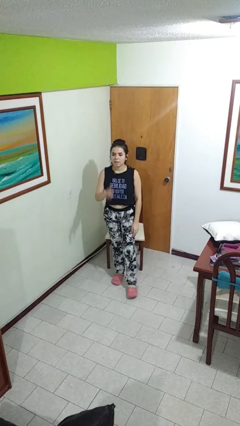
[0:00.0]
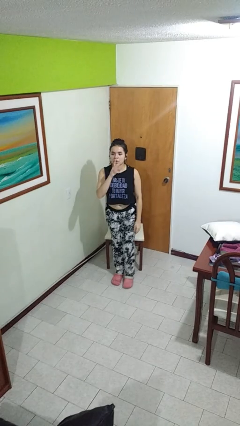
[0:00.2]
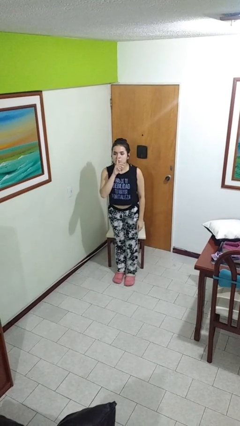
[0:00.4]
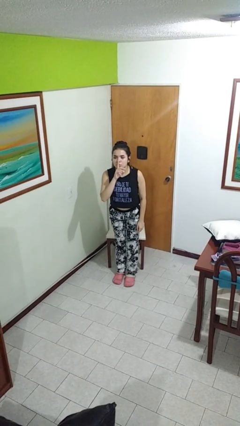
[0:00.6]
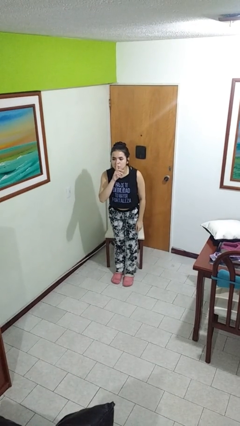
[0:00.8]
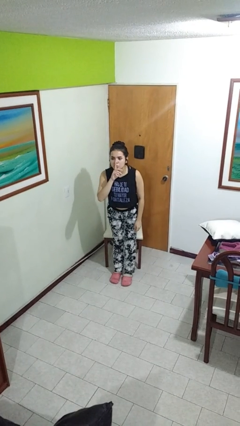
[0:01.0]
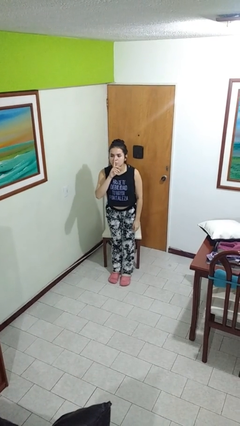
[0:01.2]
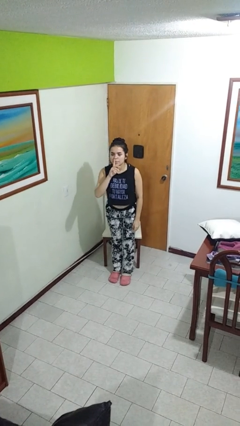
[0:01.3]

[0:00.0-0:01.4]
person gestures be quiet

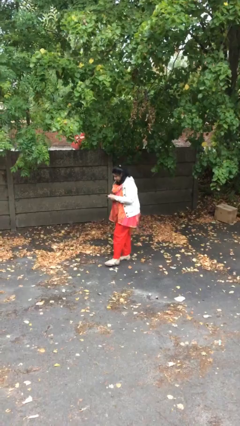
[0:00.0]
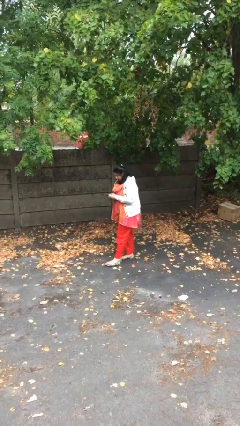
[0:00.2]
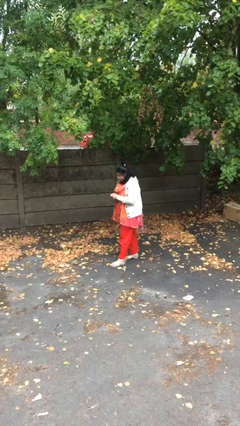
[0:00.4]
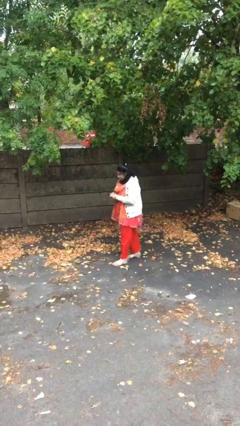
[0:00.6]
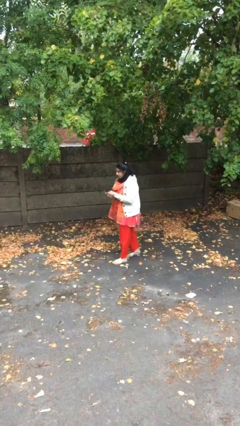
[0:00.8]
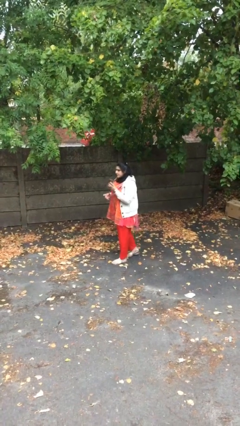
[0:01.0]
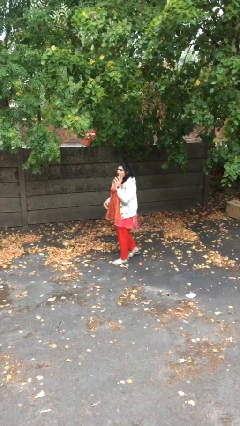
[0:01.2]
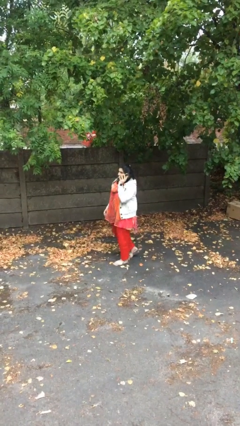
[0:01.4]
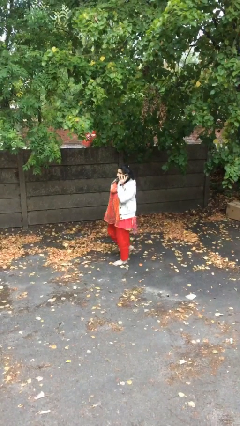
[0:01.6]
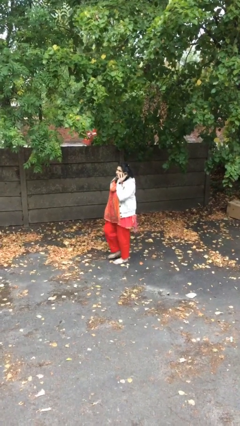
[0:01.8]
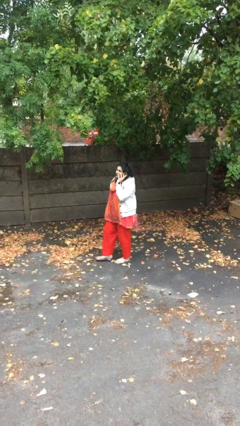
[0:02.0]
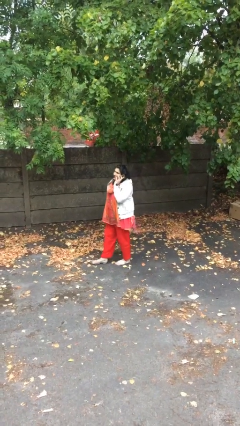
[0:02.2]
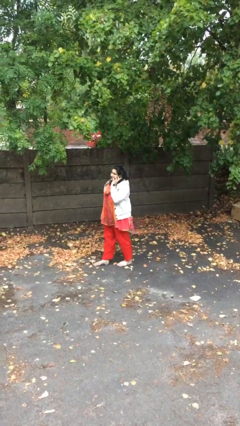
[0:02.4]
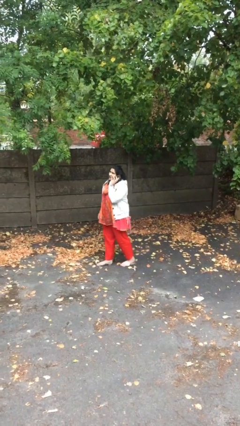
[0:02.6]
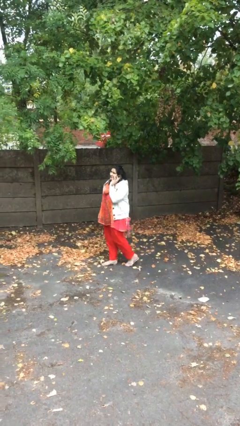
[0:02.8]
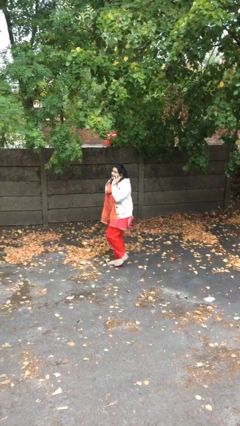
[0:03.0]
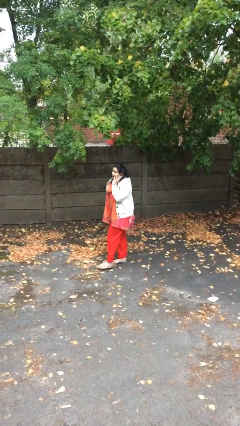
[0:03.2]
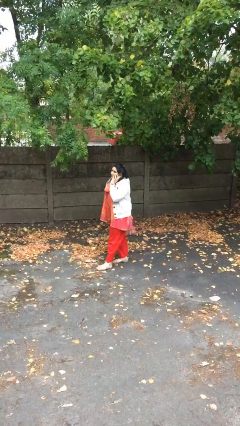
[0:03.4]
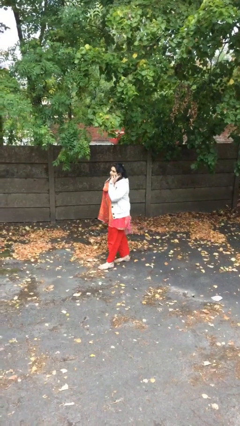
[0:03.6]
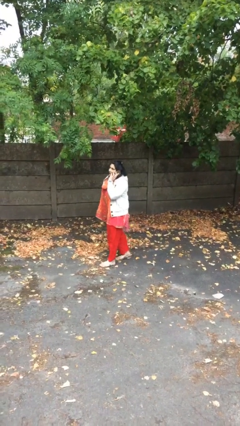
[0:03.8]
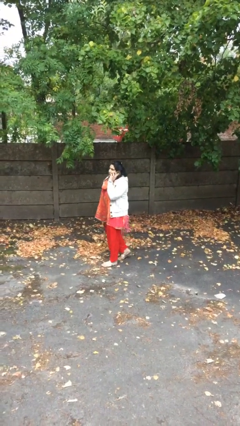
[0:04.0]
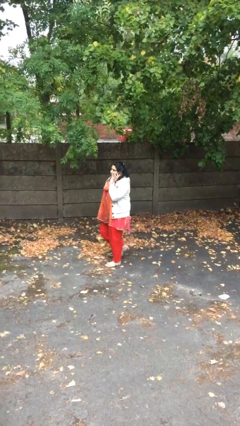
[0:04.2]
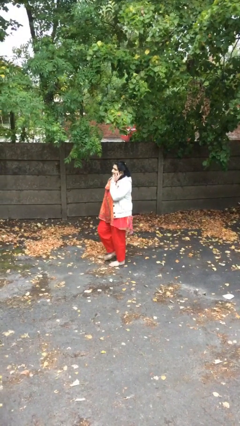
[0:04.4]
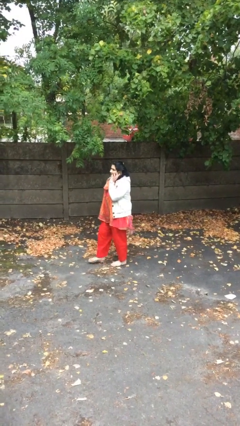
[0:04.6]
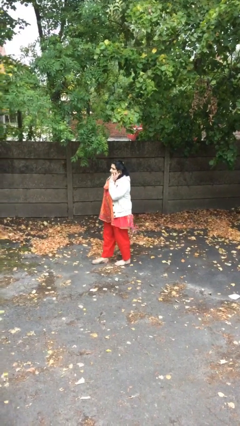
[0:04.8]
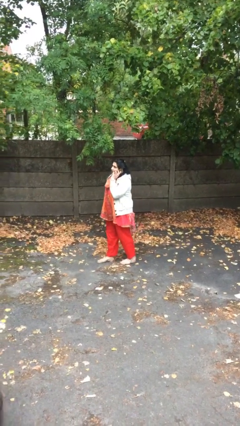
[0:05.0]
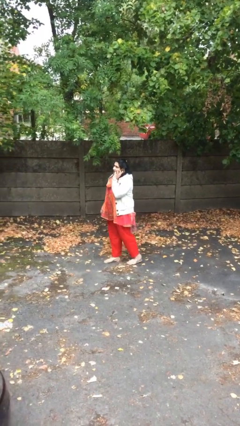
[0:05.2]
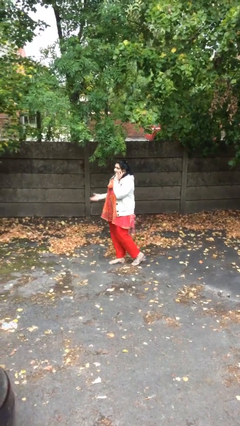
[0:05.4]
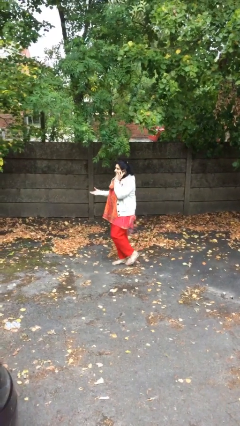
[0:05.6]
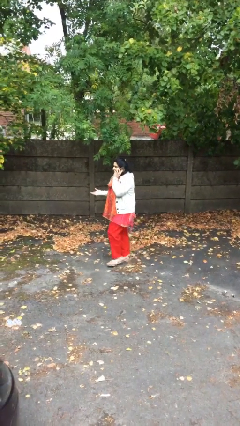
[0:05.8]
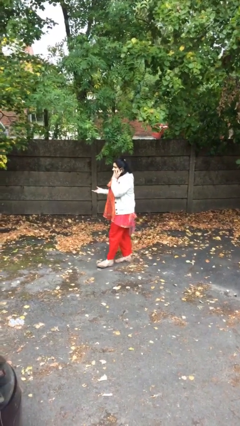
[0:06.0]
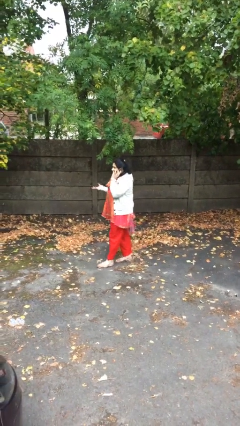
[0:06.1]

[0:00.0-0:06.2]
person talks on phone

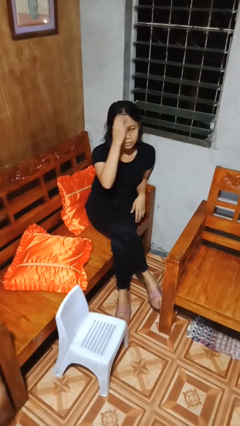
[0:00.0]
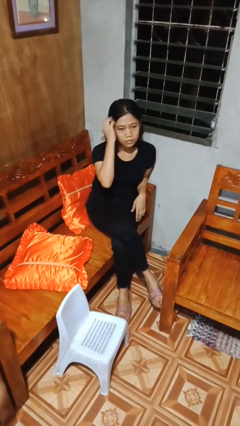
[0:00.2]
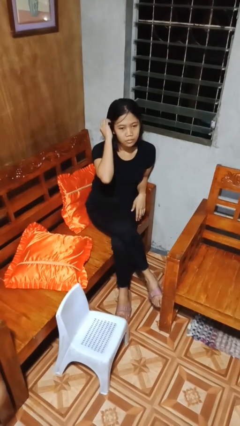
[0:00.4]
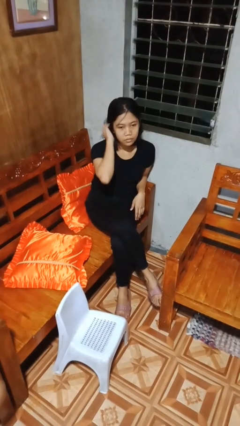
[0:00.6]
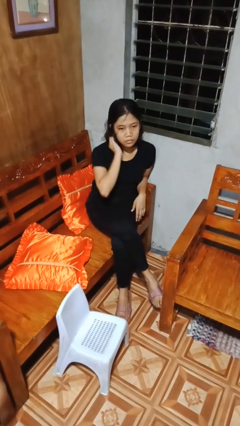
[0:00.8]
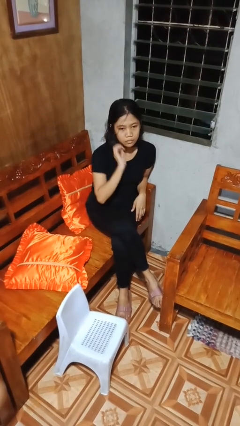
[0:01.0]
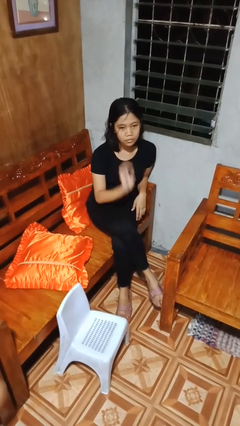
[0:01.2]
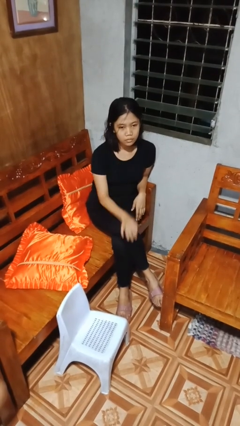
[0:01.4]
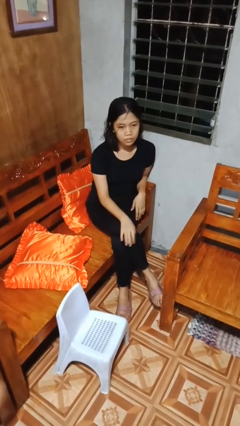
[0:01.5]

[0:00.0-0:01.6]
person strokes hair

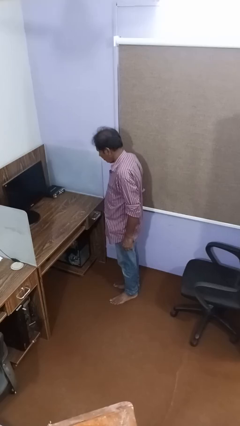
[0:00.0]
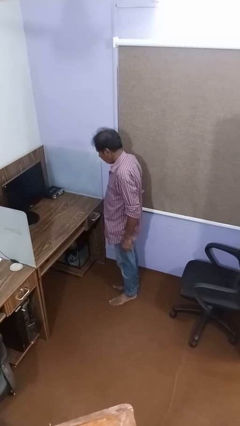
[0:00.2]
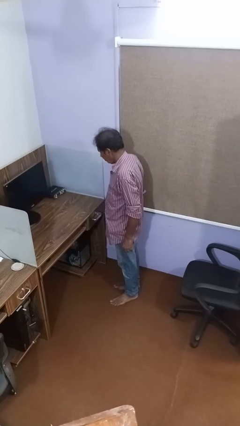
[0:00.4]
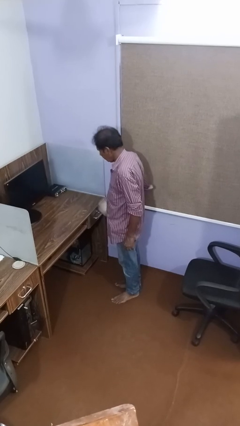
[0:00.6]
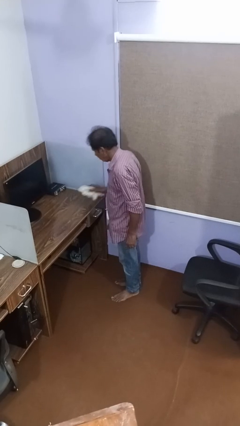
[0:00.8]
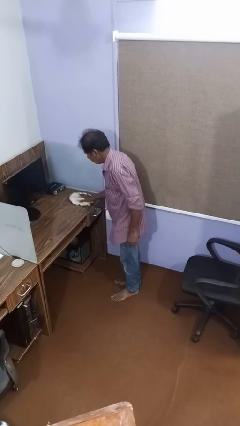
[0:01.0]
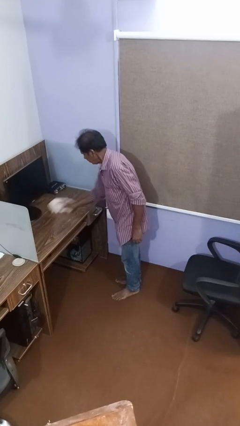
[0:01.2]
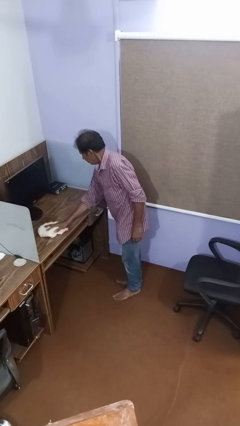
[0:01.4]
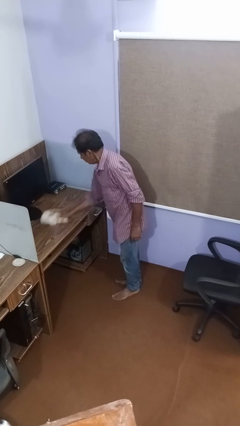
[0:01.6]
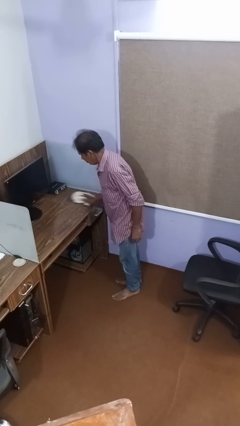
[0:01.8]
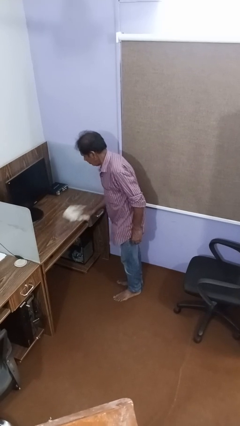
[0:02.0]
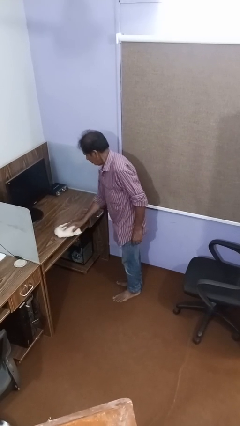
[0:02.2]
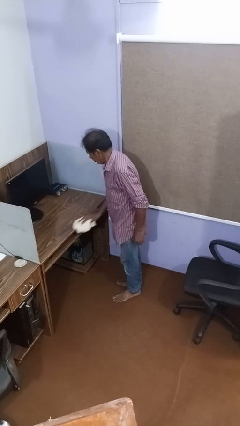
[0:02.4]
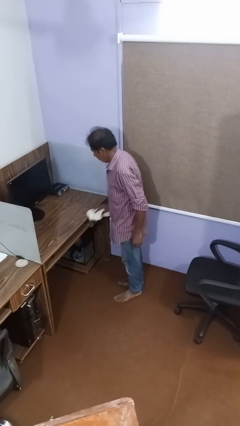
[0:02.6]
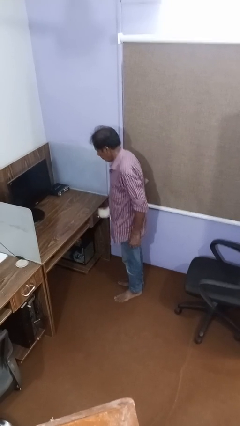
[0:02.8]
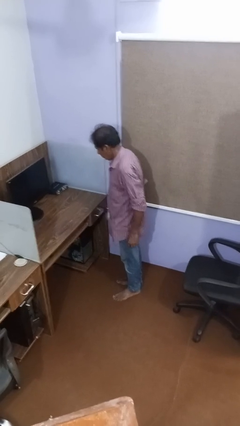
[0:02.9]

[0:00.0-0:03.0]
person cleans table with rag

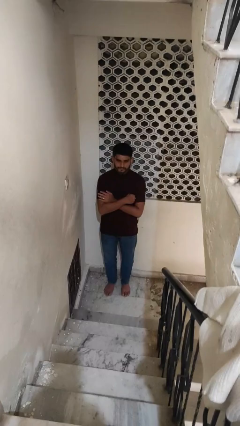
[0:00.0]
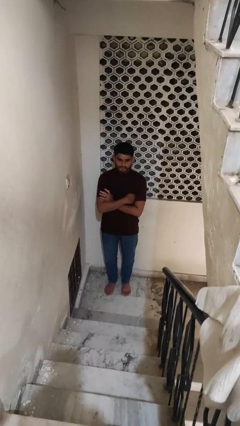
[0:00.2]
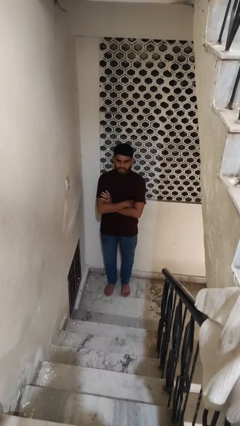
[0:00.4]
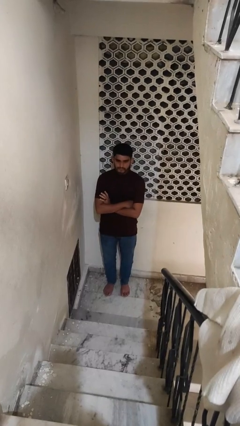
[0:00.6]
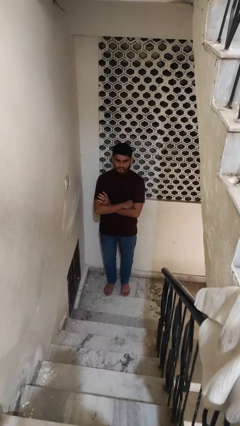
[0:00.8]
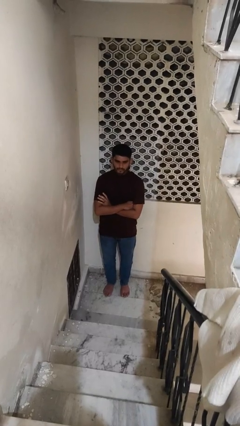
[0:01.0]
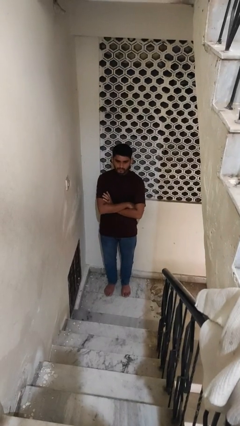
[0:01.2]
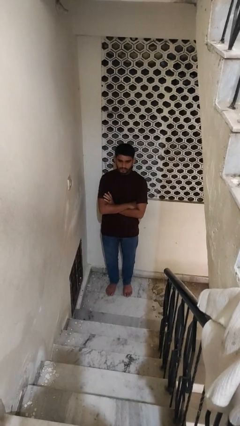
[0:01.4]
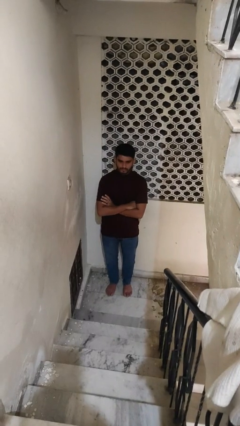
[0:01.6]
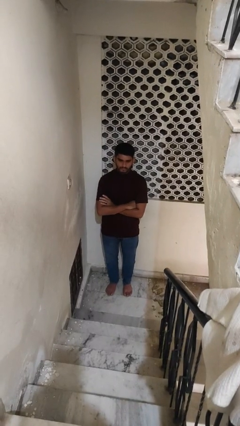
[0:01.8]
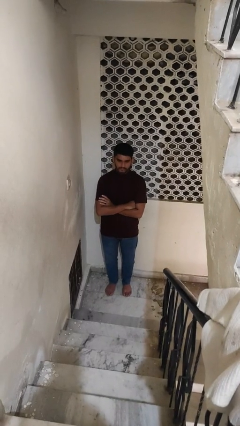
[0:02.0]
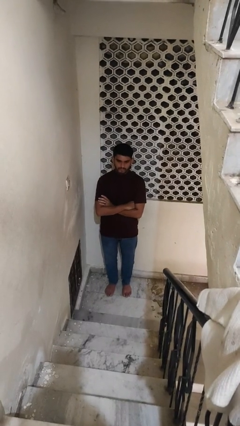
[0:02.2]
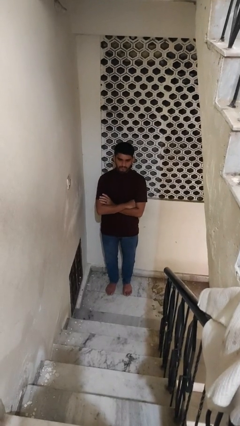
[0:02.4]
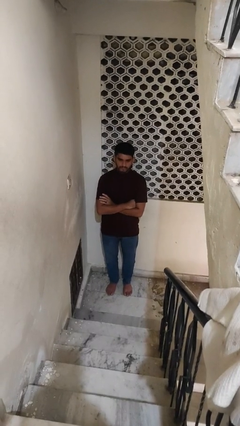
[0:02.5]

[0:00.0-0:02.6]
person crosses arms

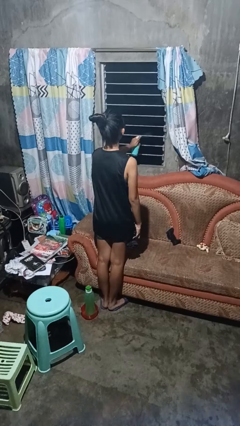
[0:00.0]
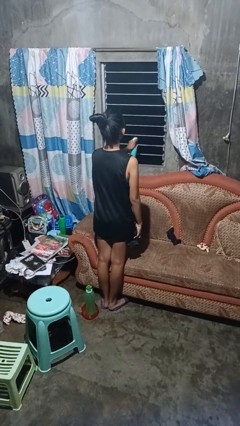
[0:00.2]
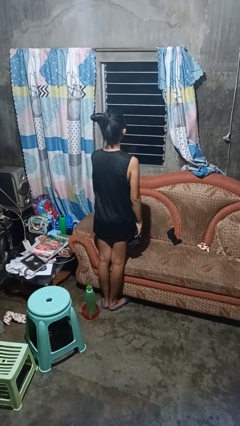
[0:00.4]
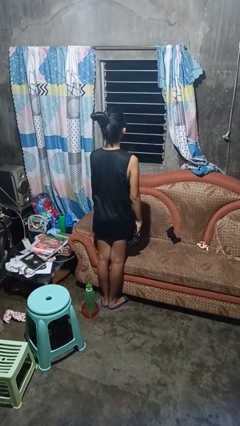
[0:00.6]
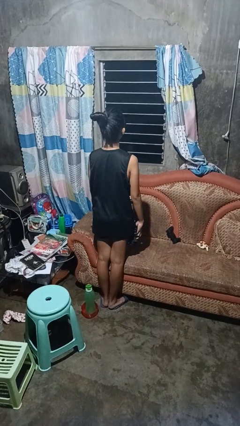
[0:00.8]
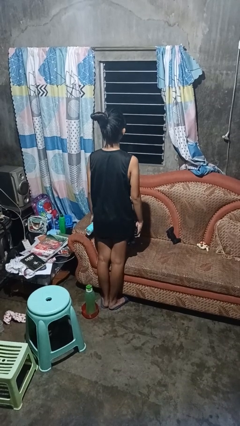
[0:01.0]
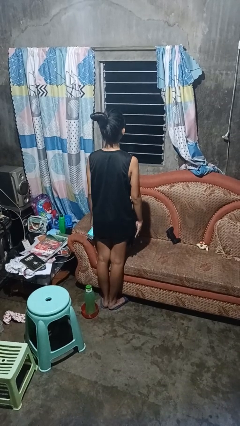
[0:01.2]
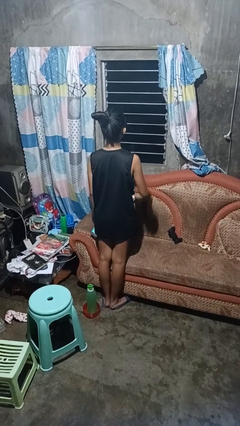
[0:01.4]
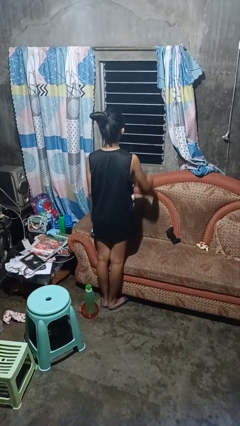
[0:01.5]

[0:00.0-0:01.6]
person sprays from bottle

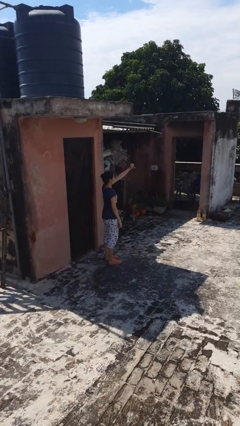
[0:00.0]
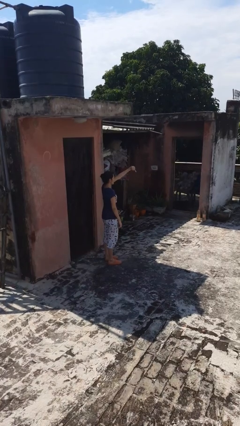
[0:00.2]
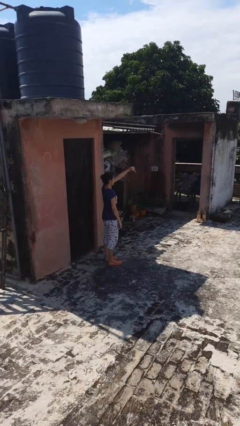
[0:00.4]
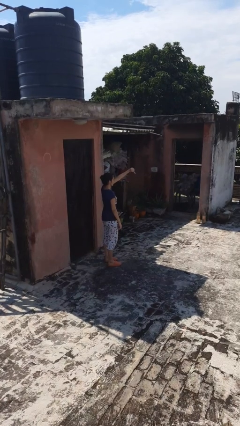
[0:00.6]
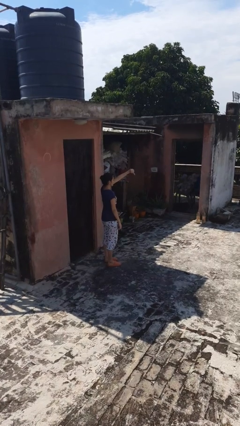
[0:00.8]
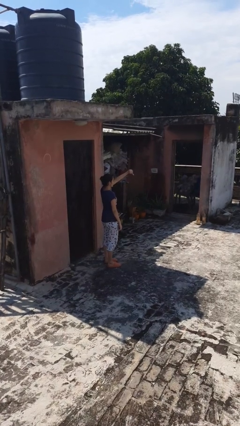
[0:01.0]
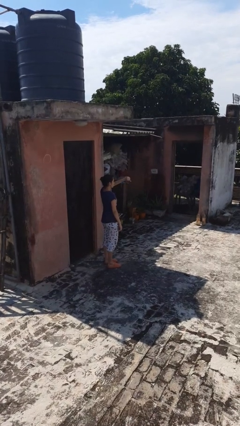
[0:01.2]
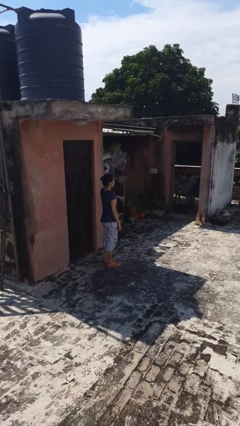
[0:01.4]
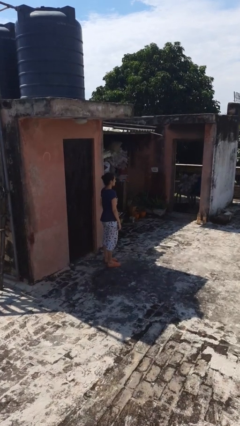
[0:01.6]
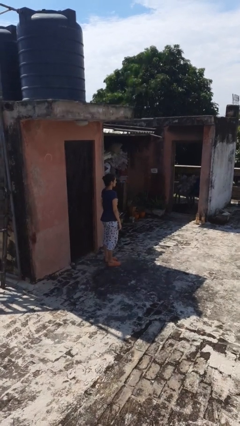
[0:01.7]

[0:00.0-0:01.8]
person gestures thumbs down
